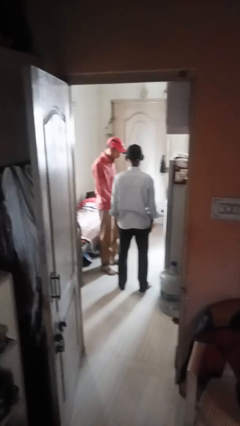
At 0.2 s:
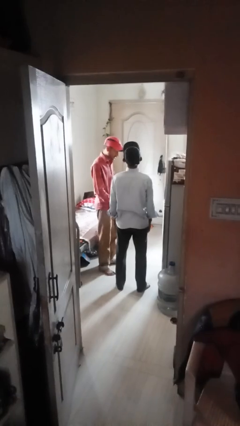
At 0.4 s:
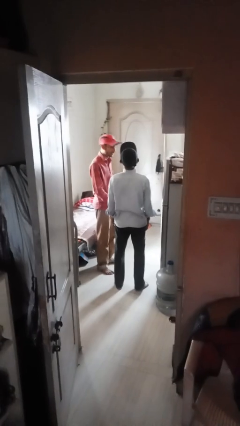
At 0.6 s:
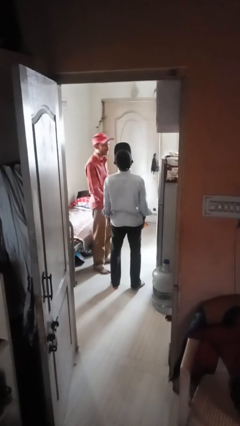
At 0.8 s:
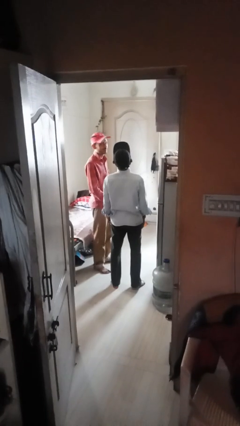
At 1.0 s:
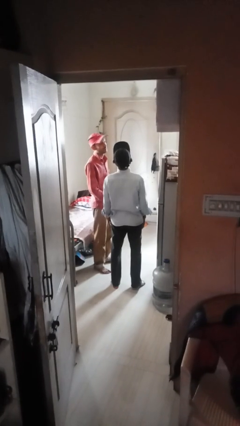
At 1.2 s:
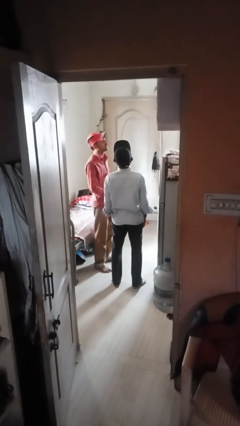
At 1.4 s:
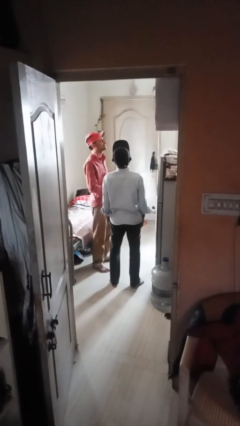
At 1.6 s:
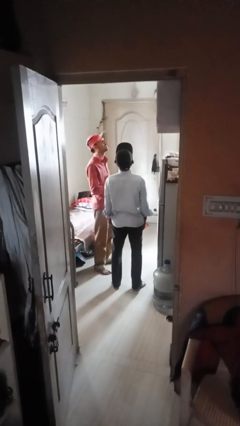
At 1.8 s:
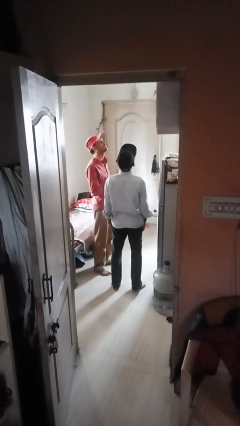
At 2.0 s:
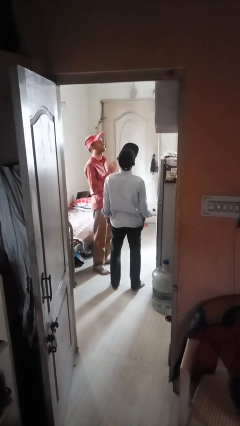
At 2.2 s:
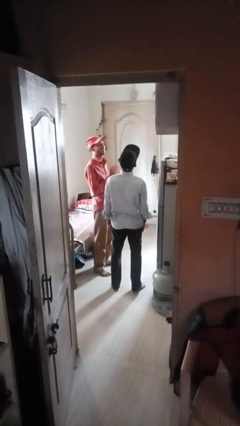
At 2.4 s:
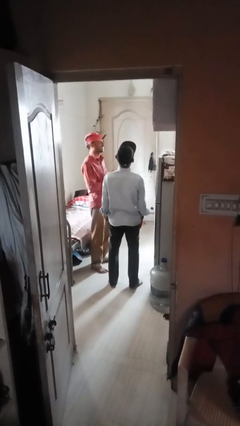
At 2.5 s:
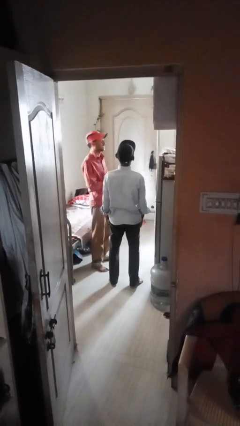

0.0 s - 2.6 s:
person laughs with person

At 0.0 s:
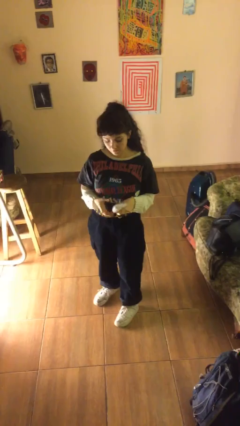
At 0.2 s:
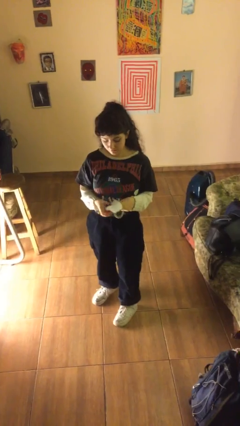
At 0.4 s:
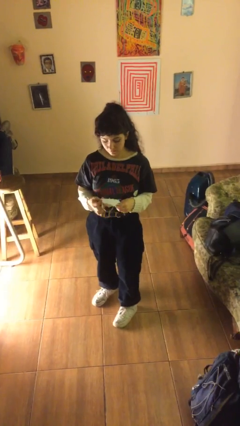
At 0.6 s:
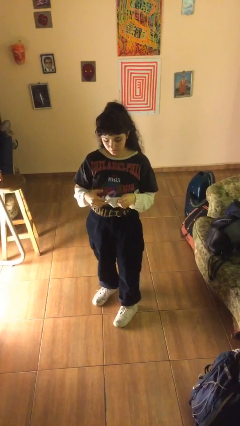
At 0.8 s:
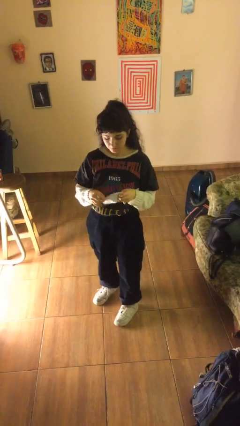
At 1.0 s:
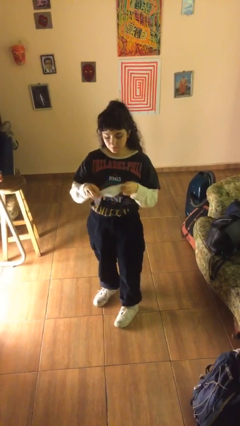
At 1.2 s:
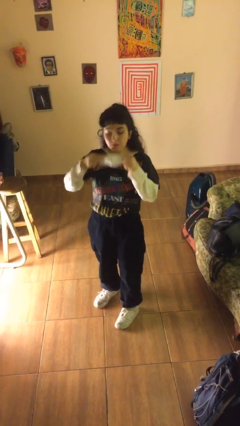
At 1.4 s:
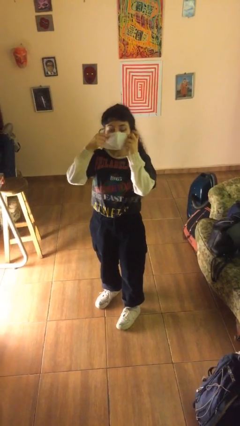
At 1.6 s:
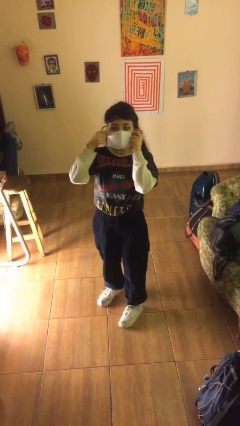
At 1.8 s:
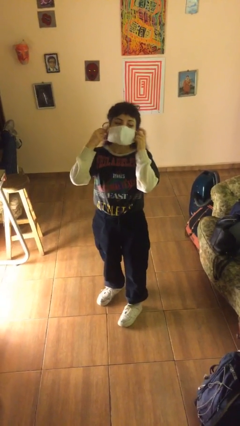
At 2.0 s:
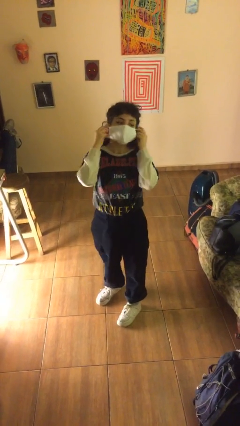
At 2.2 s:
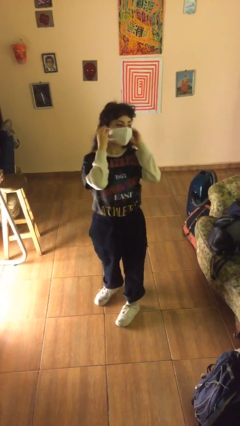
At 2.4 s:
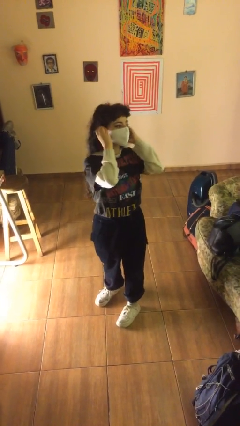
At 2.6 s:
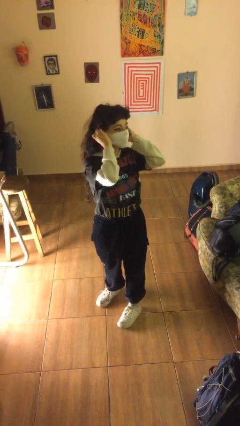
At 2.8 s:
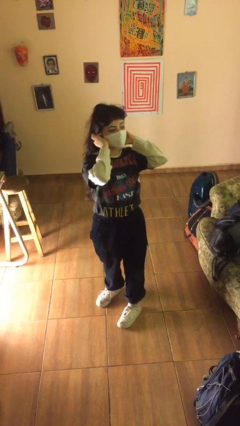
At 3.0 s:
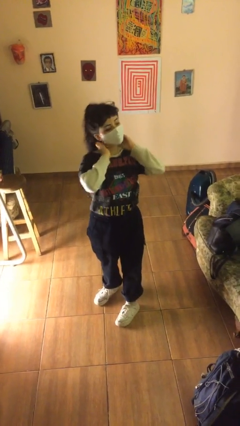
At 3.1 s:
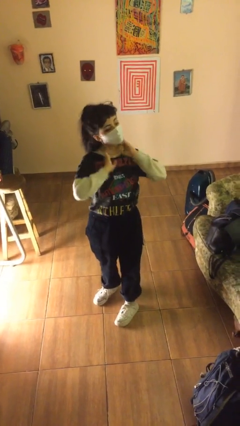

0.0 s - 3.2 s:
person puts on facemask

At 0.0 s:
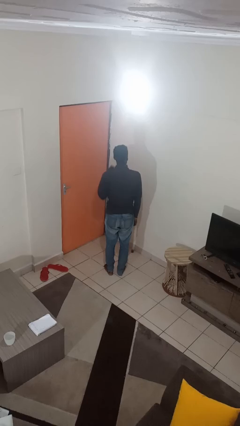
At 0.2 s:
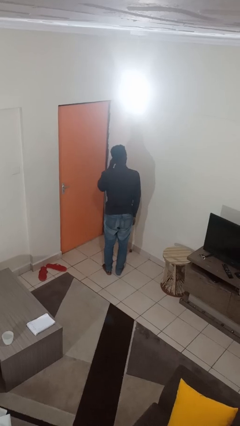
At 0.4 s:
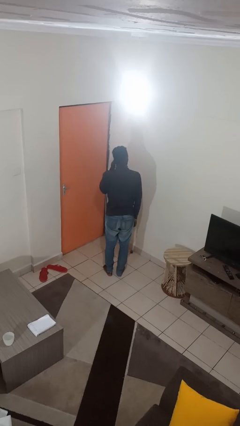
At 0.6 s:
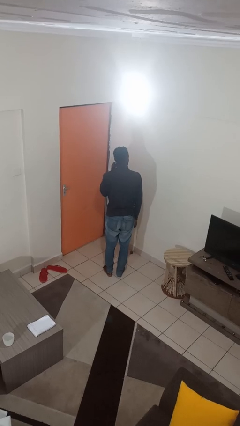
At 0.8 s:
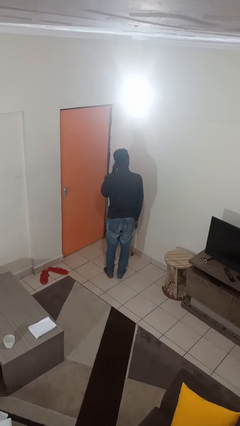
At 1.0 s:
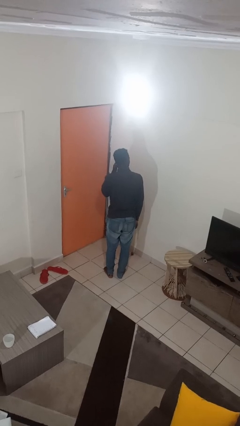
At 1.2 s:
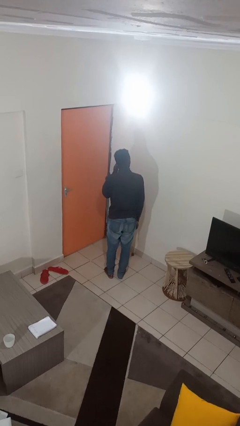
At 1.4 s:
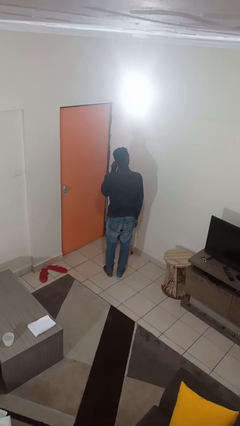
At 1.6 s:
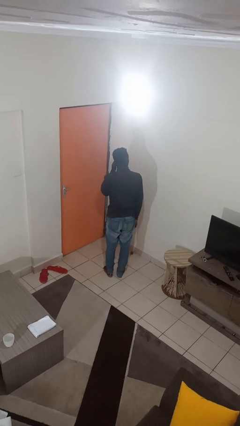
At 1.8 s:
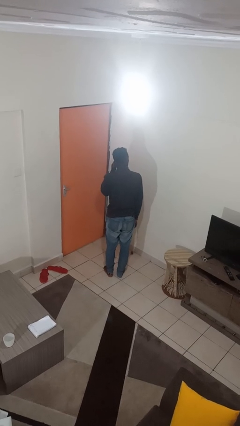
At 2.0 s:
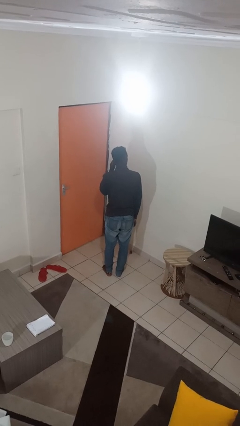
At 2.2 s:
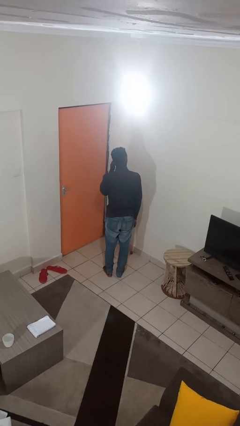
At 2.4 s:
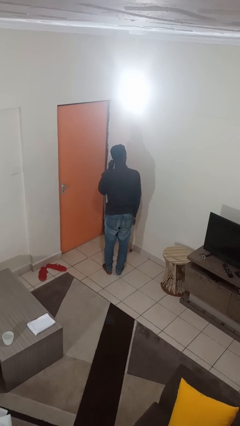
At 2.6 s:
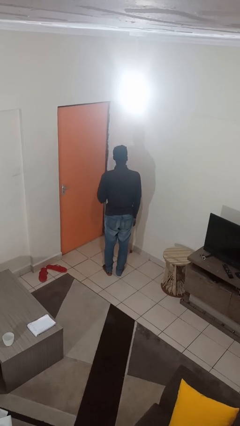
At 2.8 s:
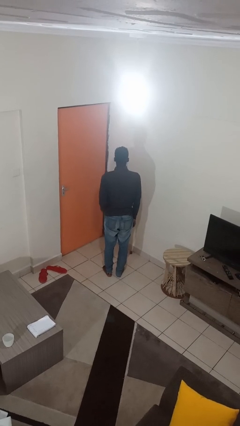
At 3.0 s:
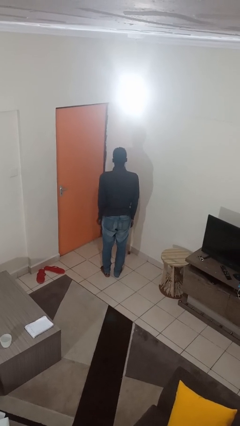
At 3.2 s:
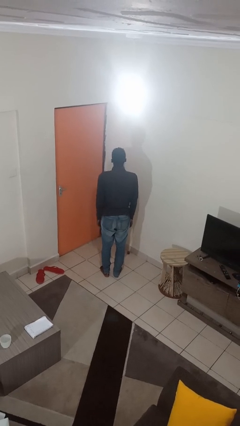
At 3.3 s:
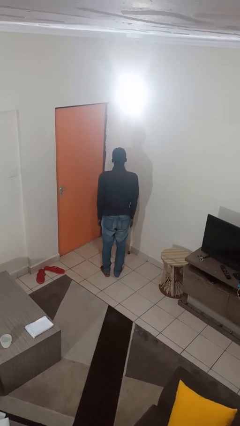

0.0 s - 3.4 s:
person touches earlobe

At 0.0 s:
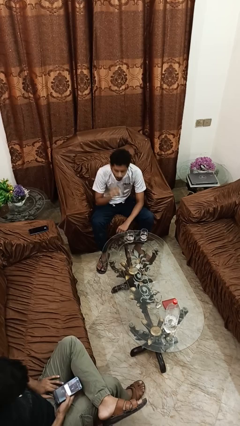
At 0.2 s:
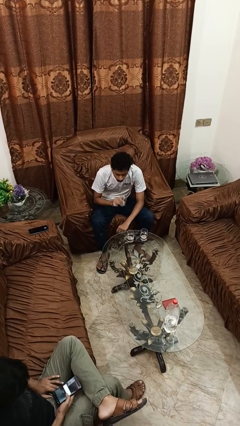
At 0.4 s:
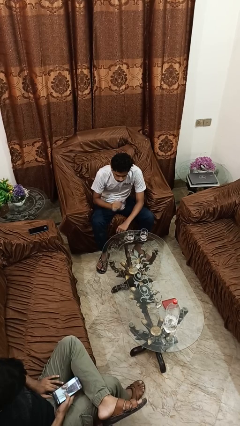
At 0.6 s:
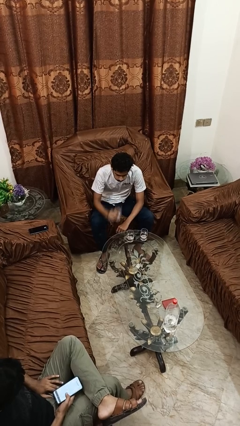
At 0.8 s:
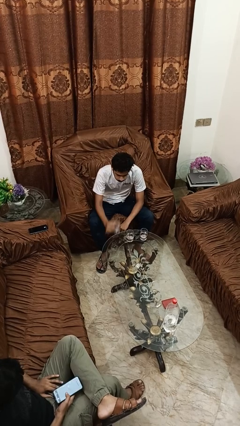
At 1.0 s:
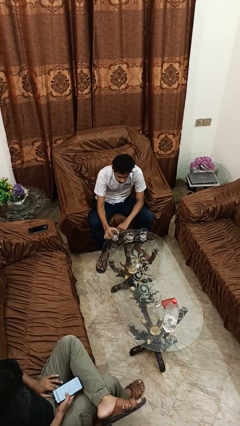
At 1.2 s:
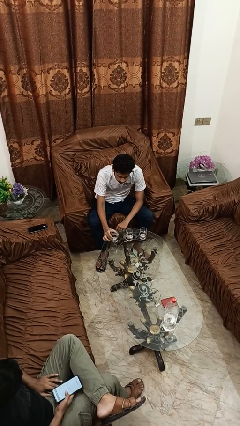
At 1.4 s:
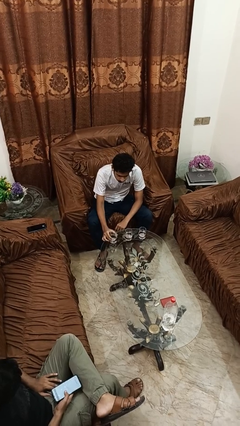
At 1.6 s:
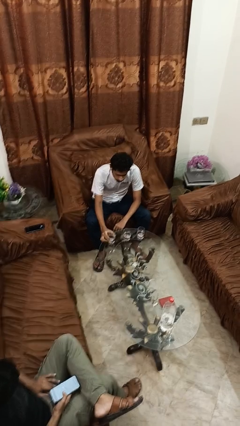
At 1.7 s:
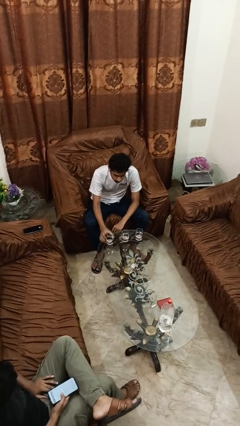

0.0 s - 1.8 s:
person puts down object on table

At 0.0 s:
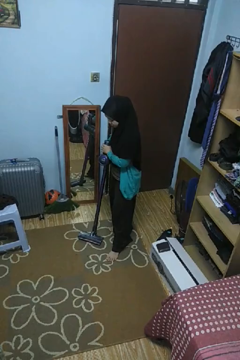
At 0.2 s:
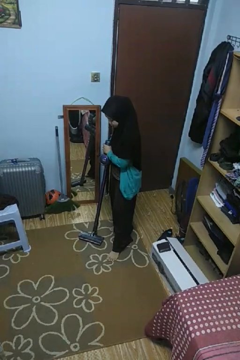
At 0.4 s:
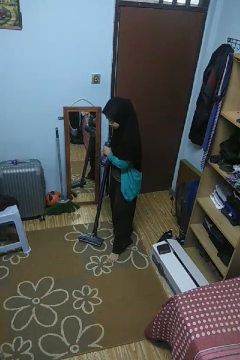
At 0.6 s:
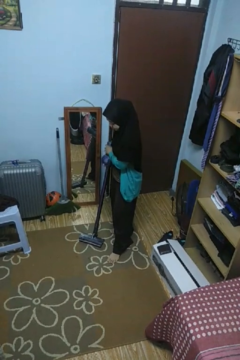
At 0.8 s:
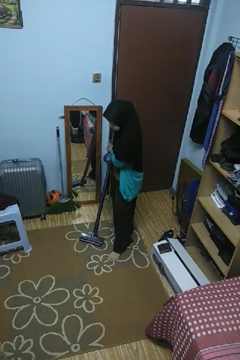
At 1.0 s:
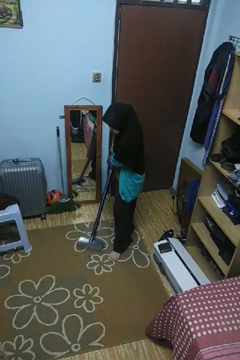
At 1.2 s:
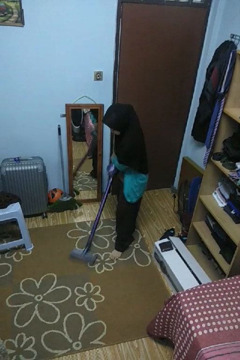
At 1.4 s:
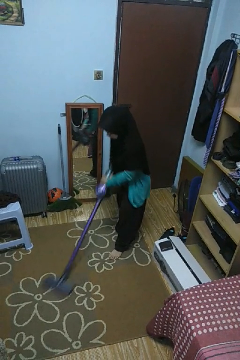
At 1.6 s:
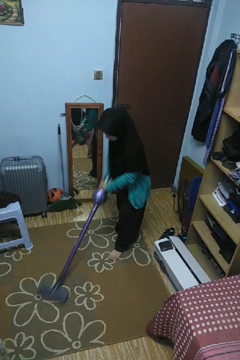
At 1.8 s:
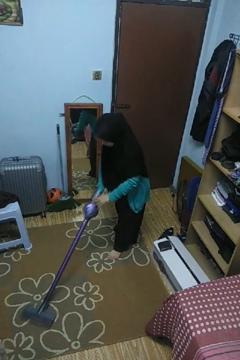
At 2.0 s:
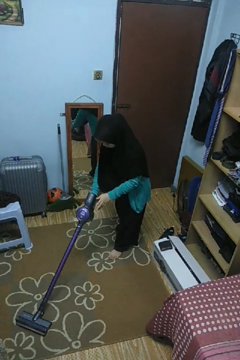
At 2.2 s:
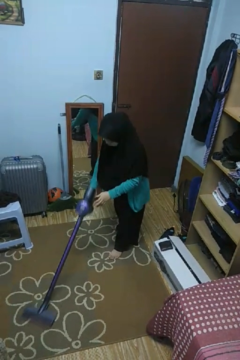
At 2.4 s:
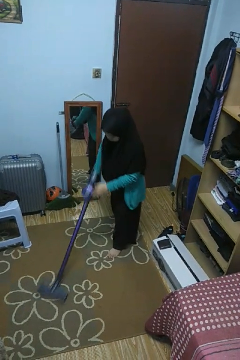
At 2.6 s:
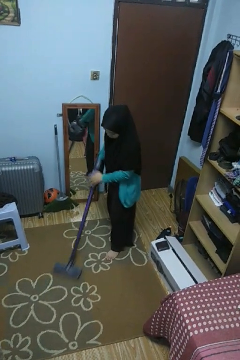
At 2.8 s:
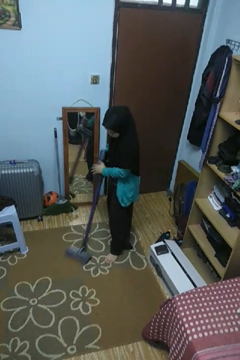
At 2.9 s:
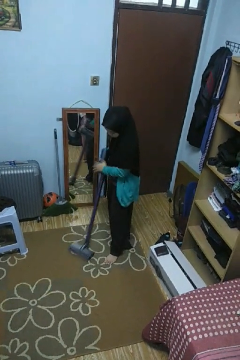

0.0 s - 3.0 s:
person vacuums carpet

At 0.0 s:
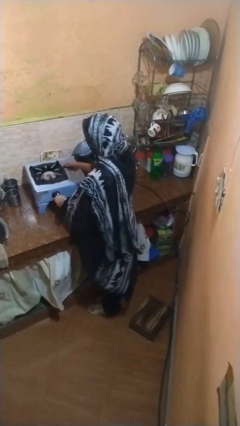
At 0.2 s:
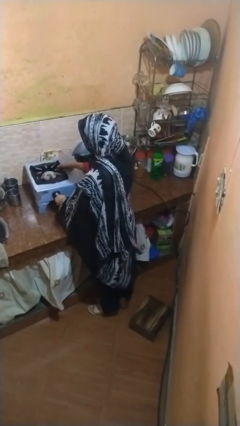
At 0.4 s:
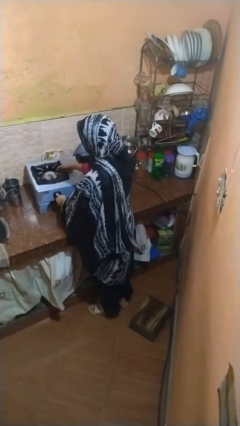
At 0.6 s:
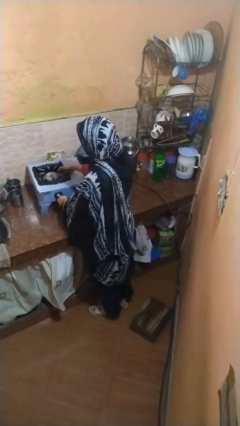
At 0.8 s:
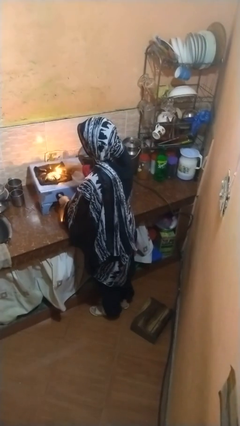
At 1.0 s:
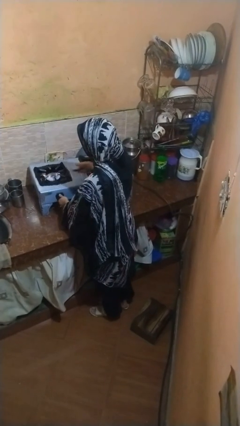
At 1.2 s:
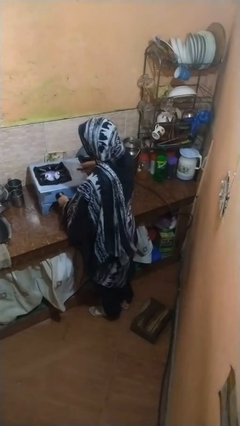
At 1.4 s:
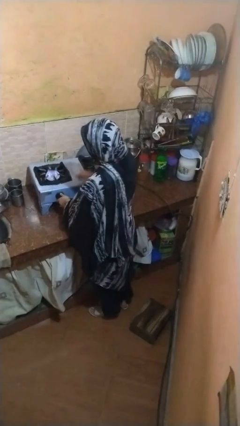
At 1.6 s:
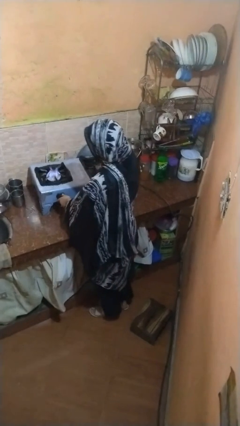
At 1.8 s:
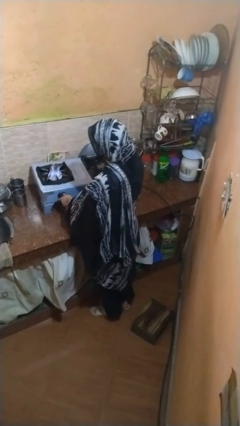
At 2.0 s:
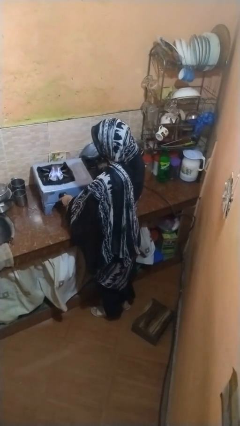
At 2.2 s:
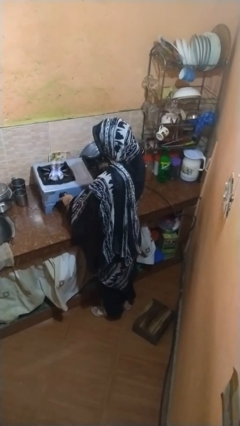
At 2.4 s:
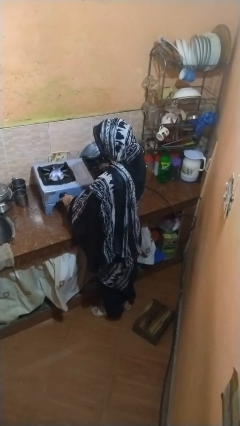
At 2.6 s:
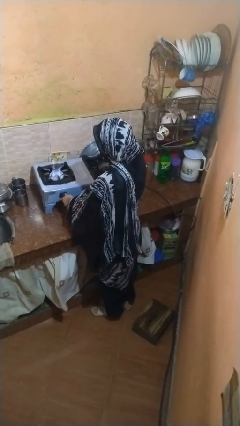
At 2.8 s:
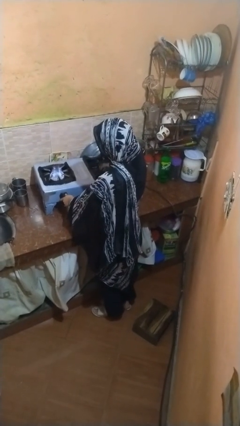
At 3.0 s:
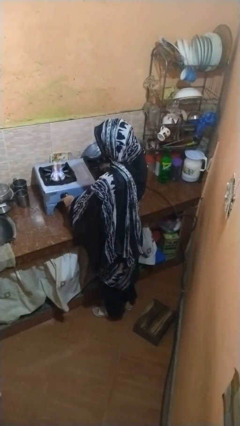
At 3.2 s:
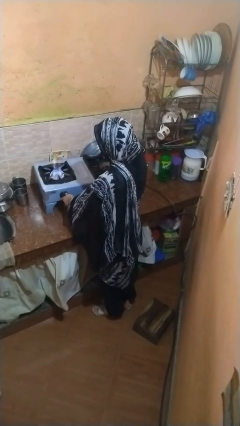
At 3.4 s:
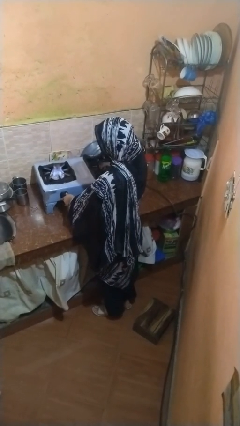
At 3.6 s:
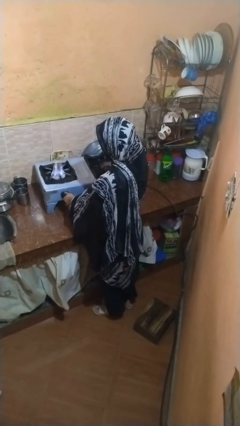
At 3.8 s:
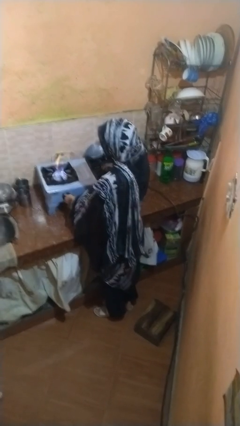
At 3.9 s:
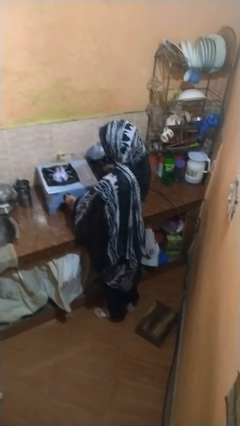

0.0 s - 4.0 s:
person turns on stovetop

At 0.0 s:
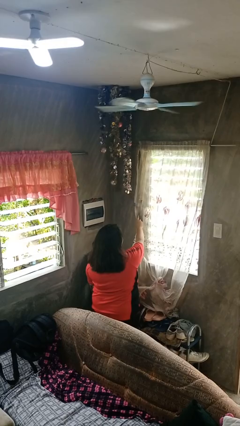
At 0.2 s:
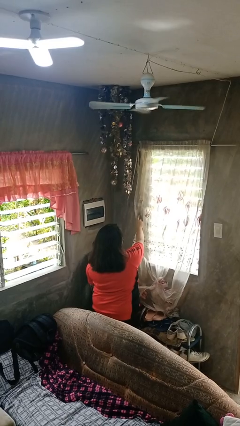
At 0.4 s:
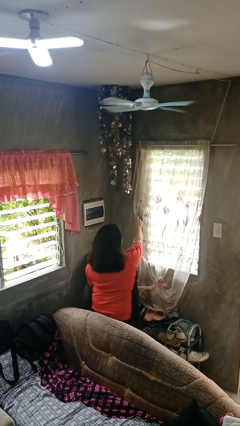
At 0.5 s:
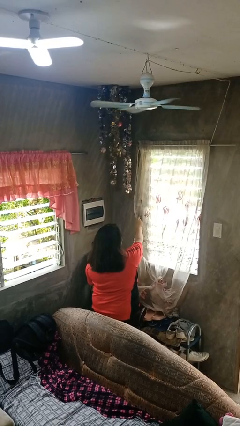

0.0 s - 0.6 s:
person opens curtains
